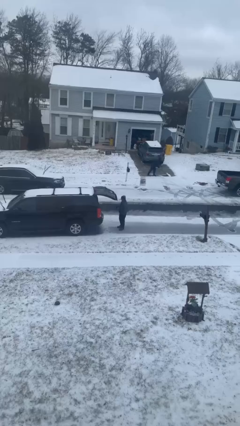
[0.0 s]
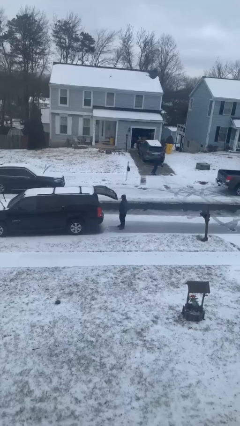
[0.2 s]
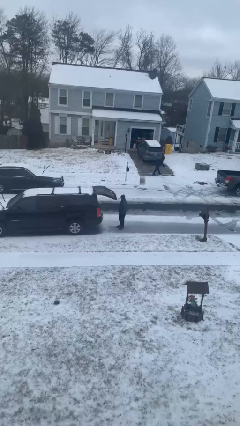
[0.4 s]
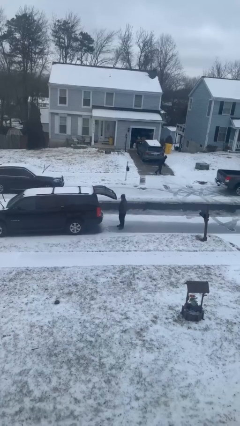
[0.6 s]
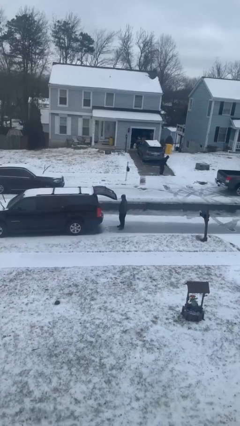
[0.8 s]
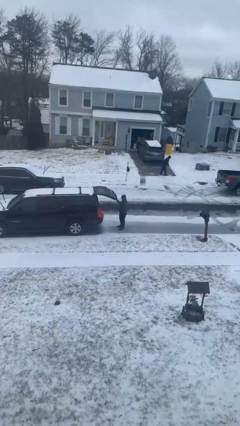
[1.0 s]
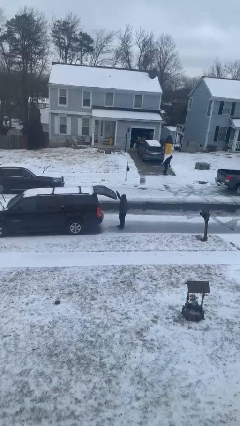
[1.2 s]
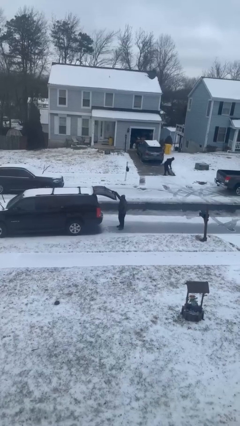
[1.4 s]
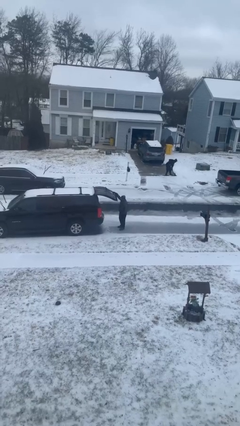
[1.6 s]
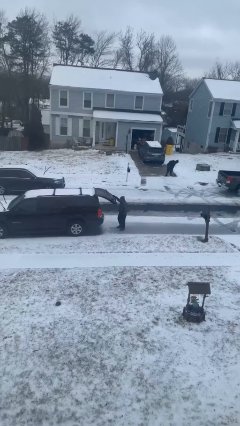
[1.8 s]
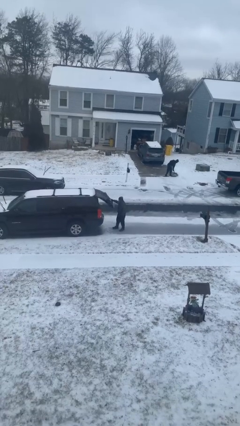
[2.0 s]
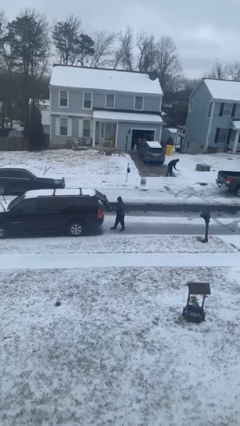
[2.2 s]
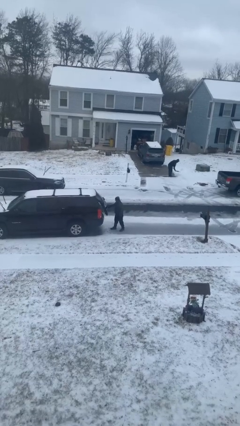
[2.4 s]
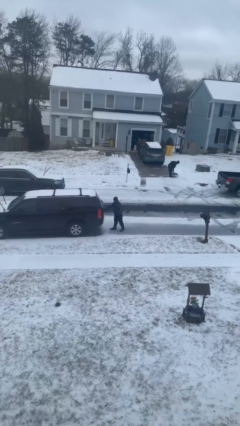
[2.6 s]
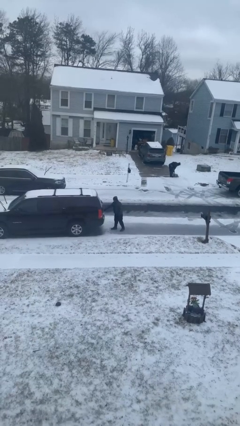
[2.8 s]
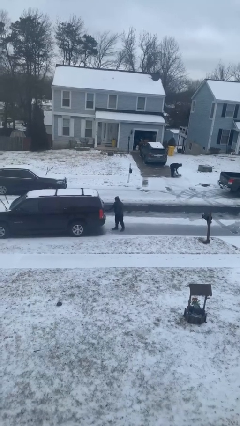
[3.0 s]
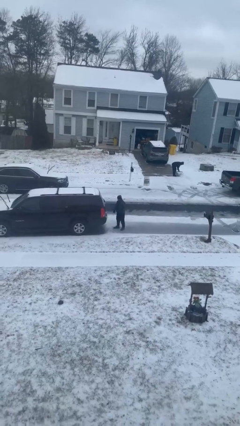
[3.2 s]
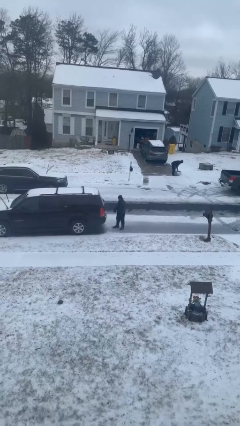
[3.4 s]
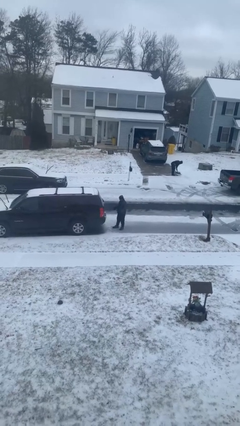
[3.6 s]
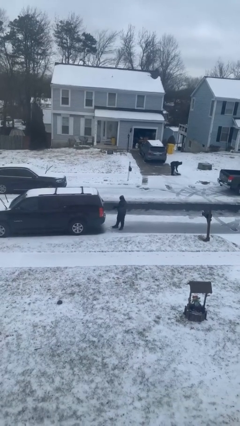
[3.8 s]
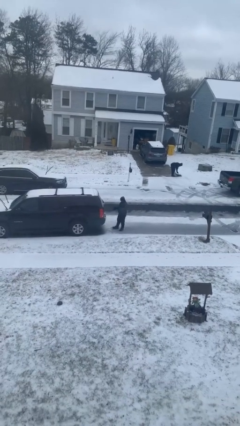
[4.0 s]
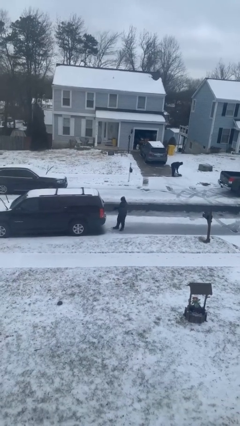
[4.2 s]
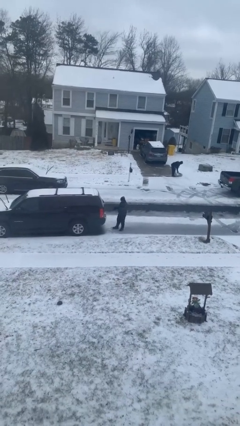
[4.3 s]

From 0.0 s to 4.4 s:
person closes car trunk

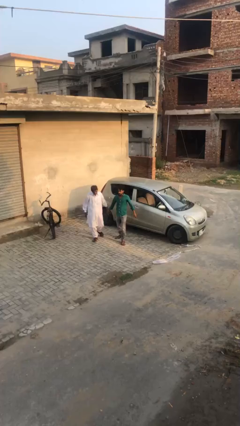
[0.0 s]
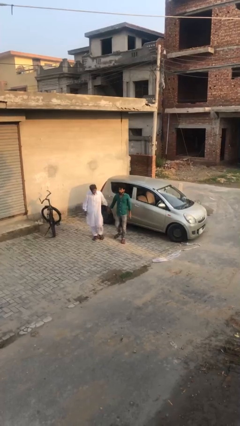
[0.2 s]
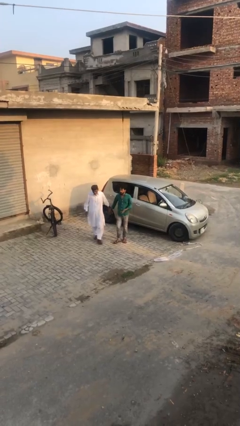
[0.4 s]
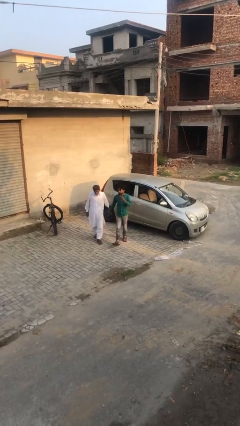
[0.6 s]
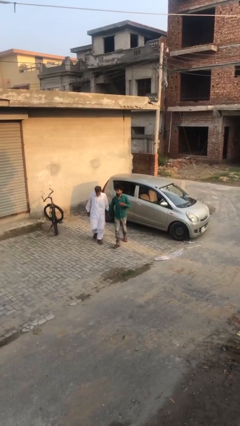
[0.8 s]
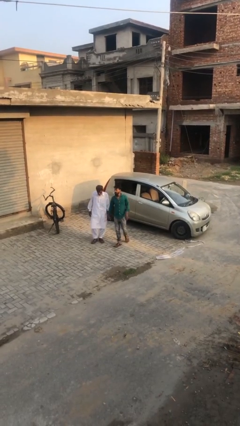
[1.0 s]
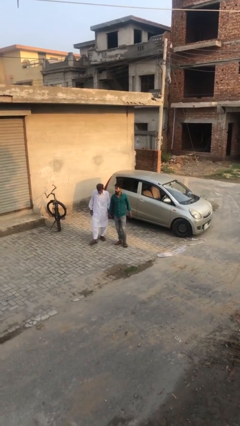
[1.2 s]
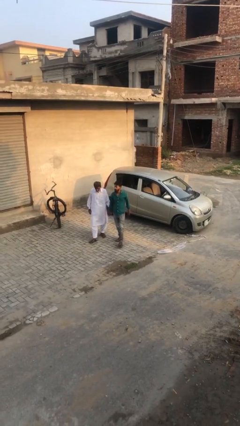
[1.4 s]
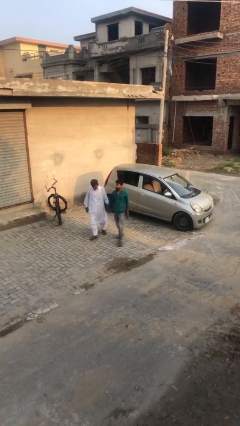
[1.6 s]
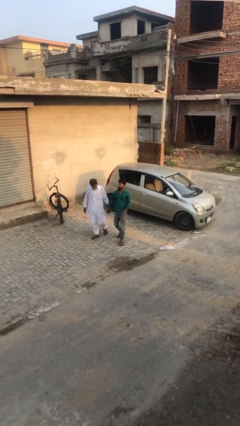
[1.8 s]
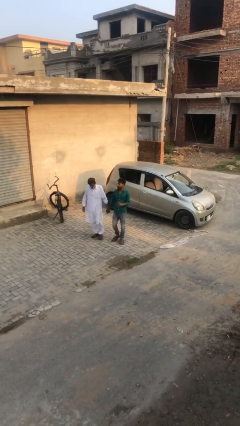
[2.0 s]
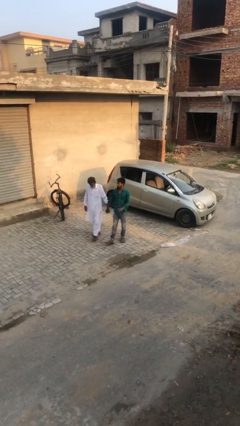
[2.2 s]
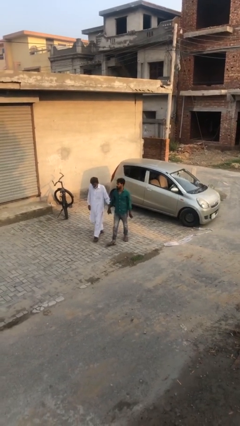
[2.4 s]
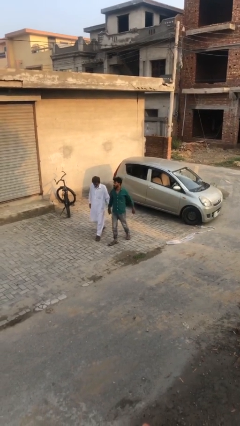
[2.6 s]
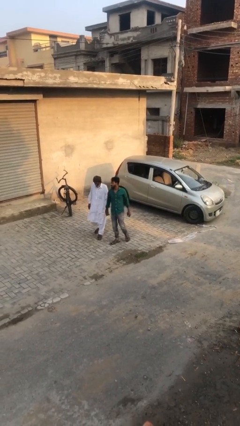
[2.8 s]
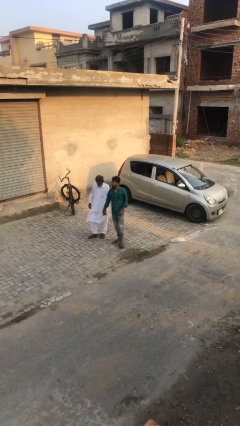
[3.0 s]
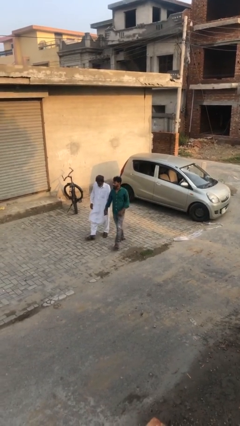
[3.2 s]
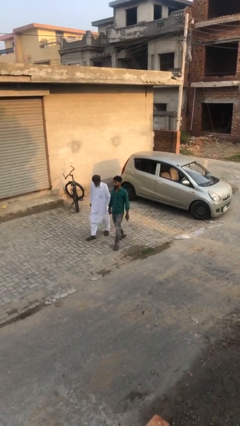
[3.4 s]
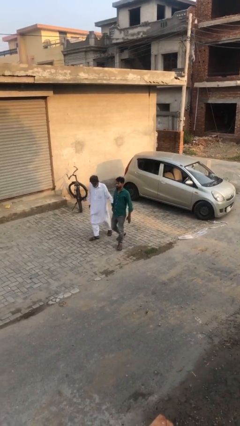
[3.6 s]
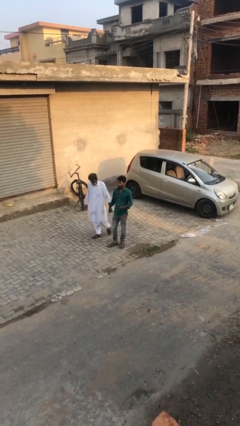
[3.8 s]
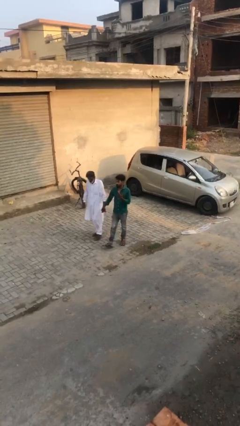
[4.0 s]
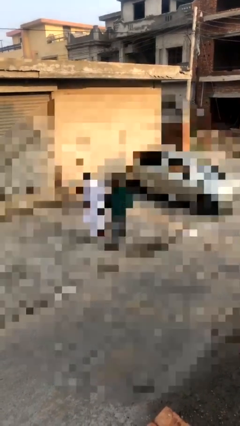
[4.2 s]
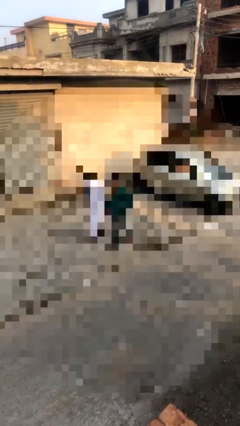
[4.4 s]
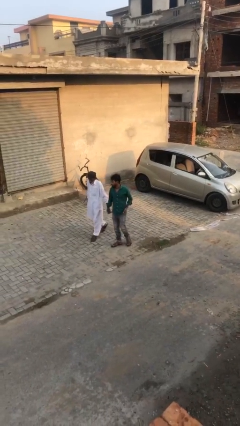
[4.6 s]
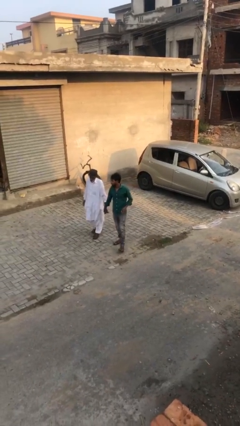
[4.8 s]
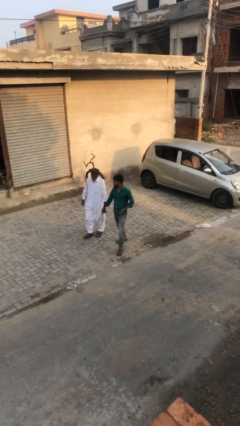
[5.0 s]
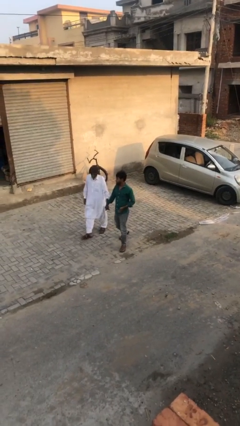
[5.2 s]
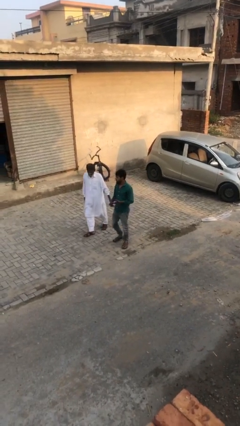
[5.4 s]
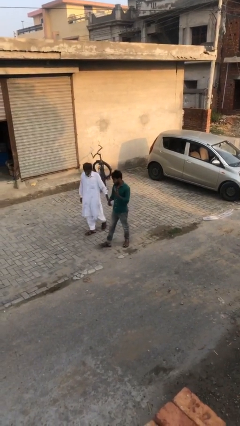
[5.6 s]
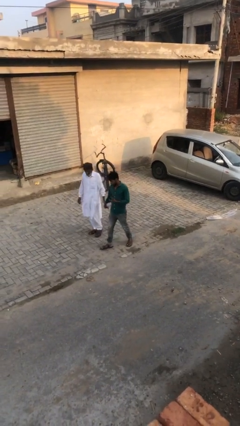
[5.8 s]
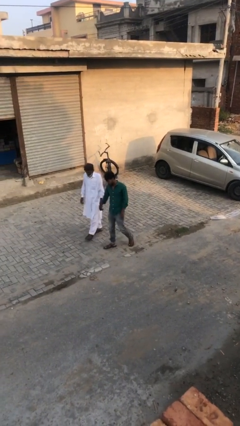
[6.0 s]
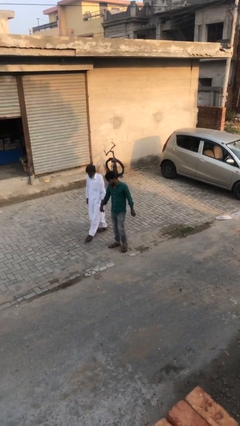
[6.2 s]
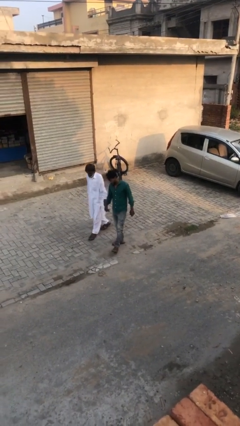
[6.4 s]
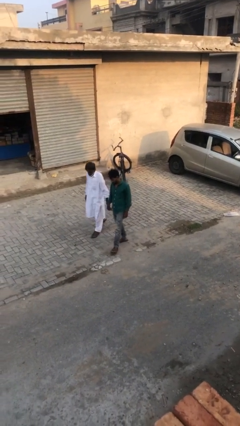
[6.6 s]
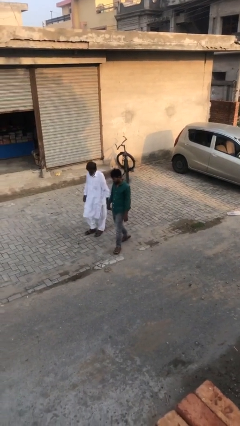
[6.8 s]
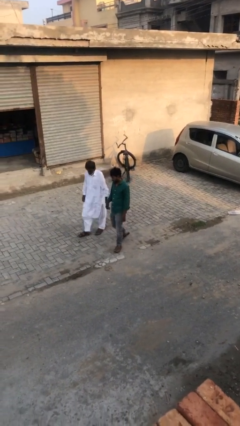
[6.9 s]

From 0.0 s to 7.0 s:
person holds hand

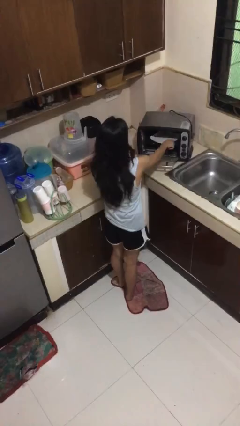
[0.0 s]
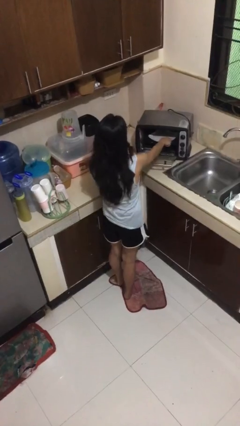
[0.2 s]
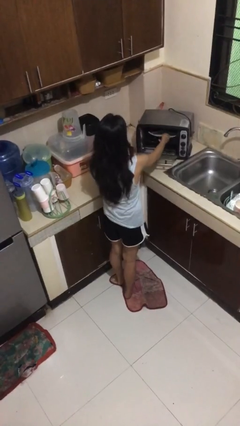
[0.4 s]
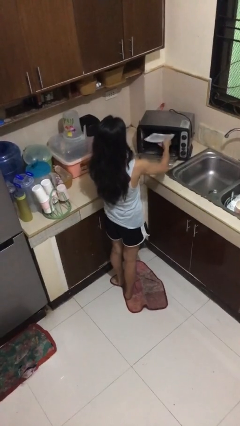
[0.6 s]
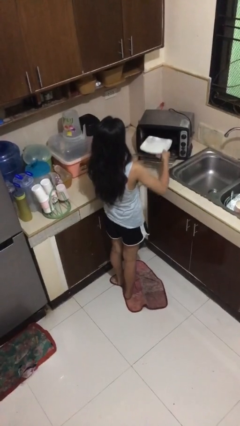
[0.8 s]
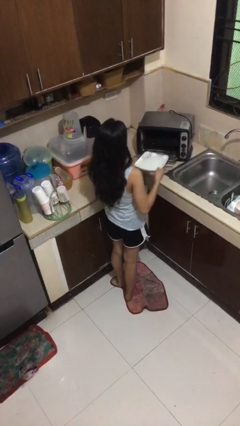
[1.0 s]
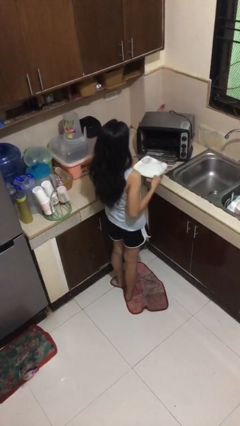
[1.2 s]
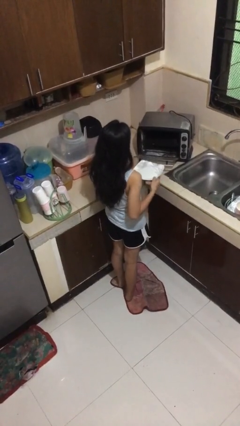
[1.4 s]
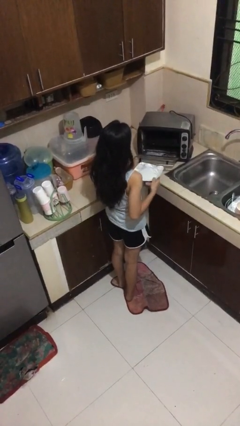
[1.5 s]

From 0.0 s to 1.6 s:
person takes object from microwave

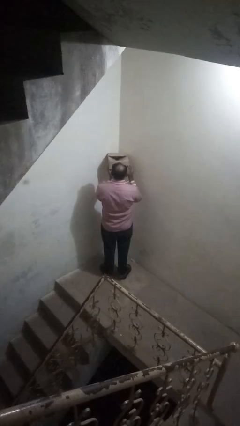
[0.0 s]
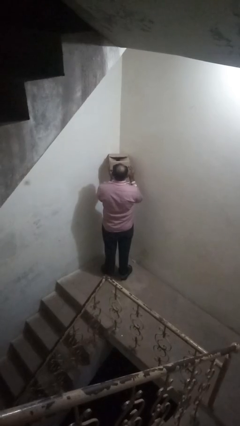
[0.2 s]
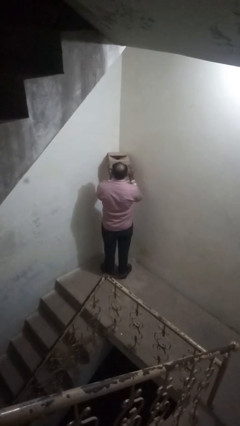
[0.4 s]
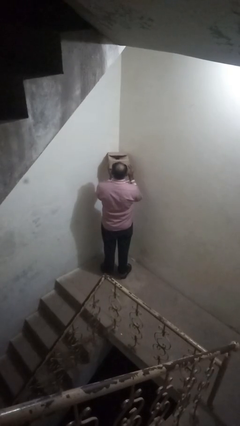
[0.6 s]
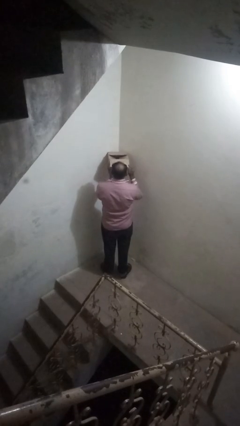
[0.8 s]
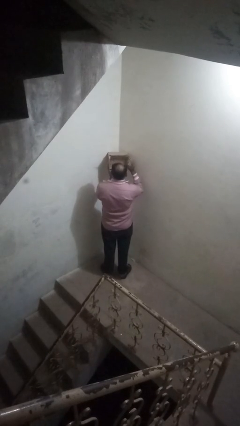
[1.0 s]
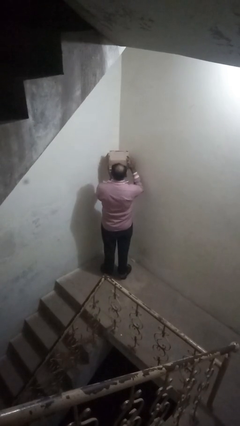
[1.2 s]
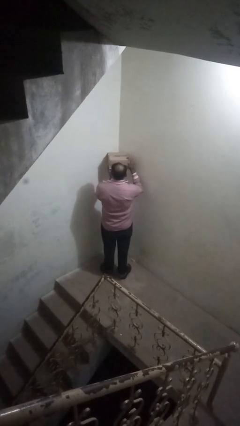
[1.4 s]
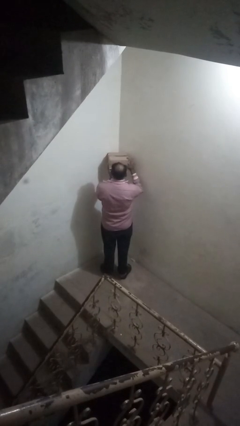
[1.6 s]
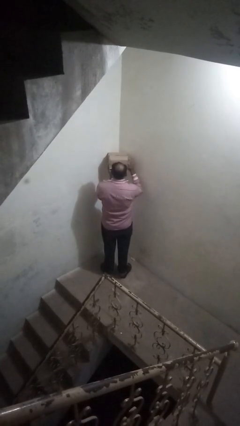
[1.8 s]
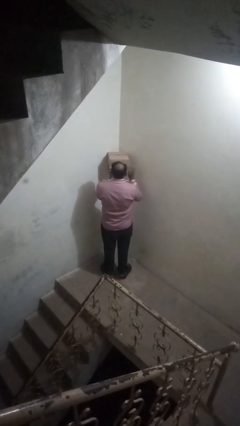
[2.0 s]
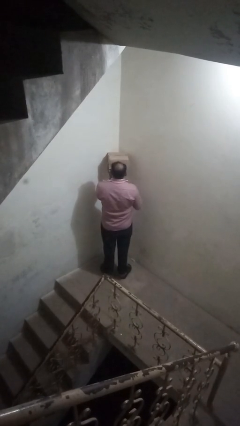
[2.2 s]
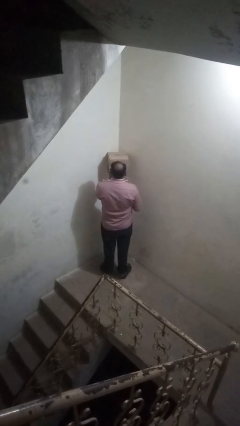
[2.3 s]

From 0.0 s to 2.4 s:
person closes mailbox

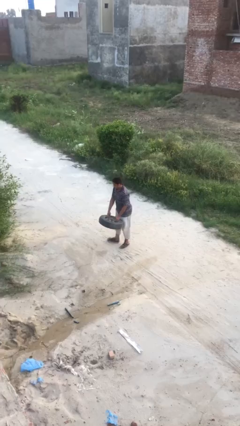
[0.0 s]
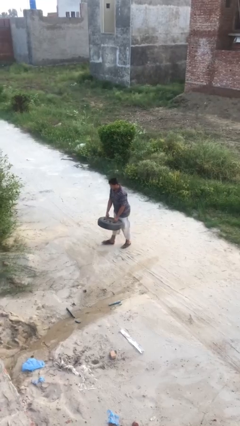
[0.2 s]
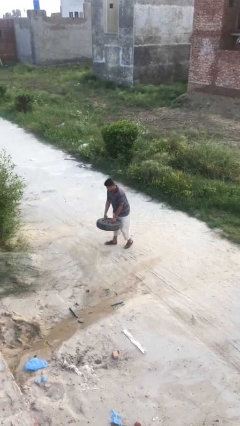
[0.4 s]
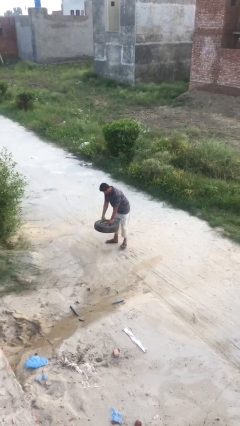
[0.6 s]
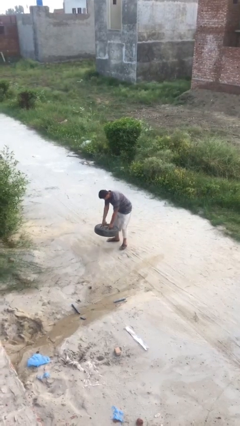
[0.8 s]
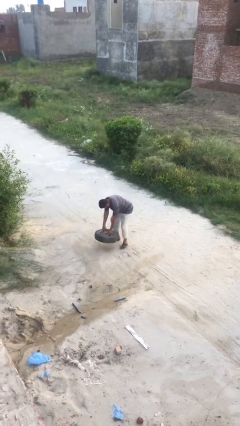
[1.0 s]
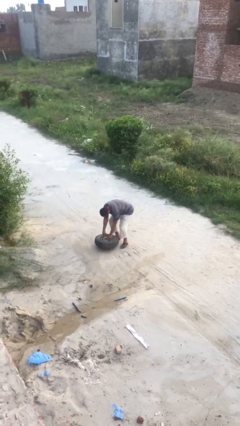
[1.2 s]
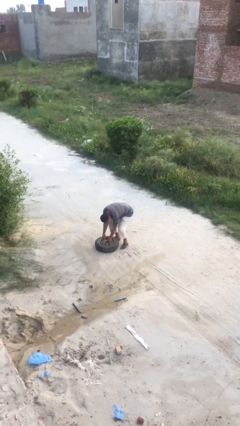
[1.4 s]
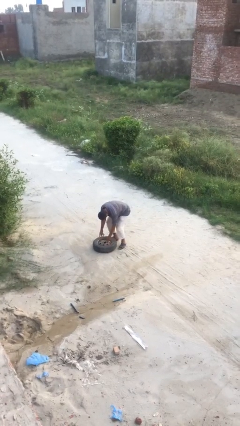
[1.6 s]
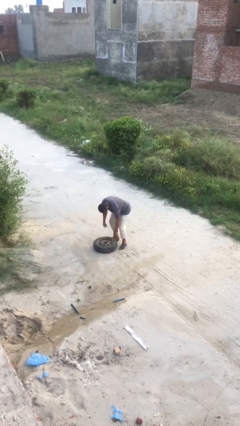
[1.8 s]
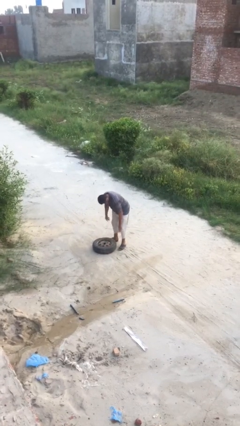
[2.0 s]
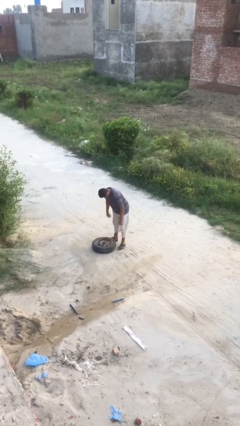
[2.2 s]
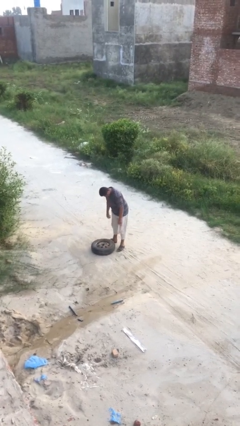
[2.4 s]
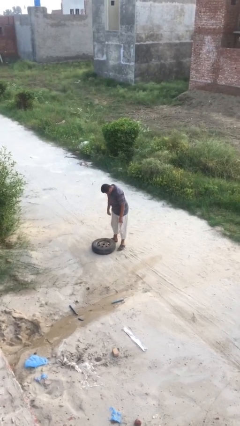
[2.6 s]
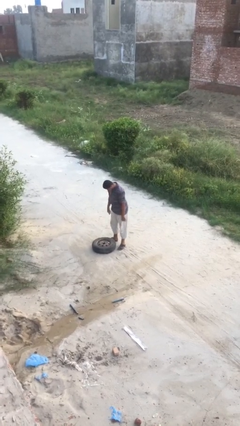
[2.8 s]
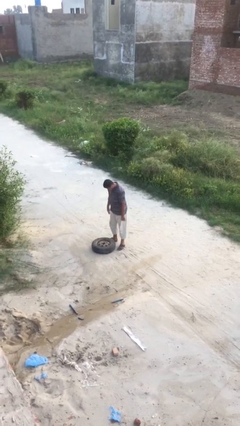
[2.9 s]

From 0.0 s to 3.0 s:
person puts down object on floor
